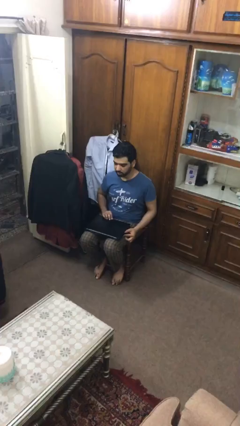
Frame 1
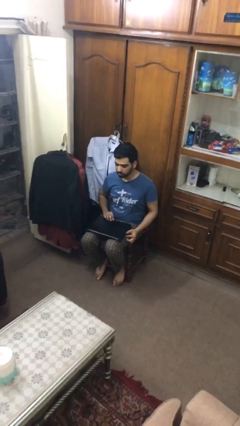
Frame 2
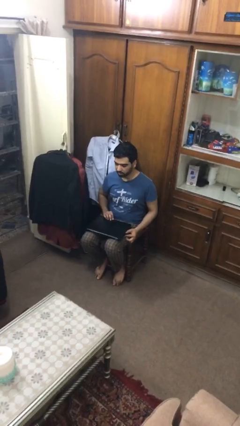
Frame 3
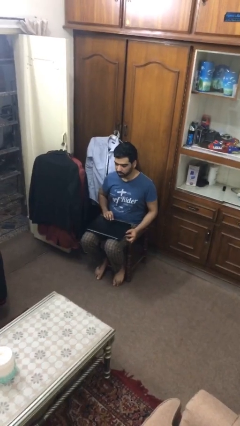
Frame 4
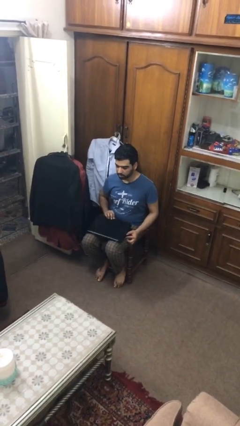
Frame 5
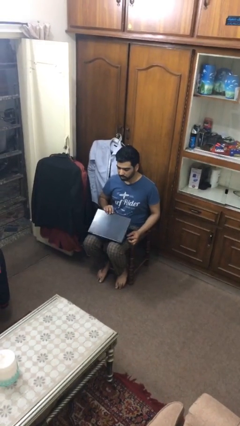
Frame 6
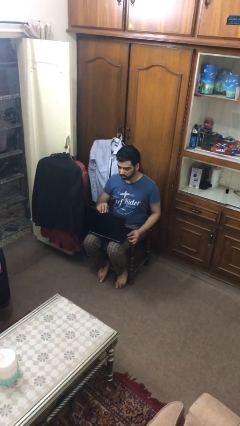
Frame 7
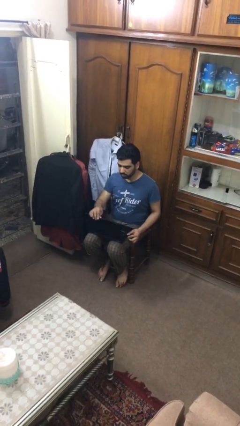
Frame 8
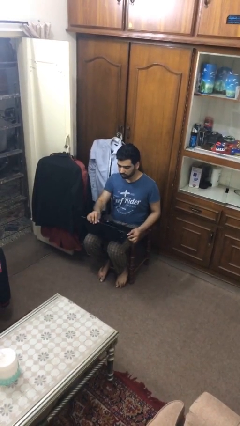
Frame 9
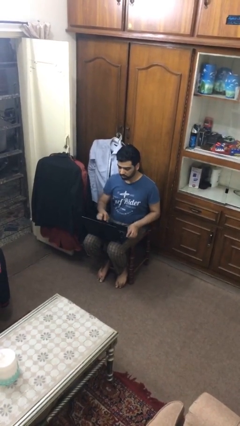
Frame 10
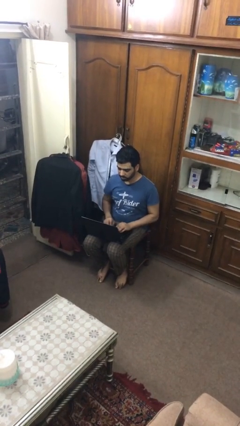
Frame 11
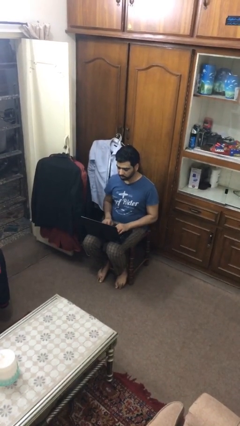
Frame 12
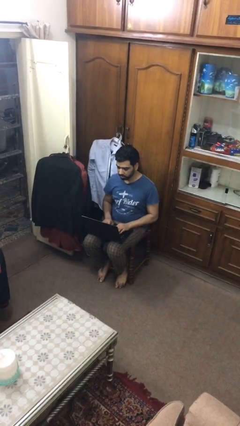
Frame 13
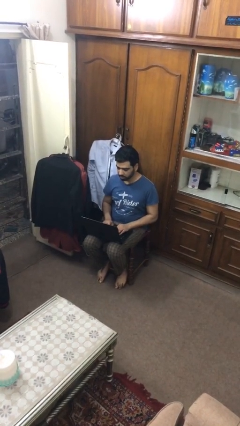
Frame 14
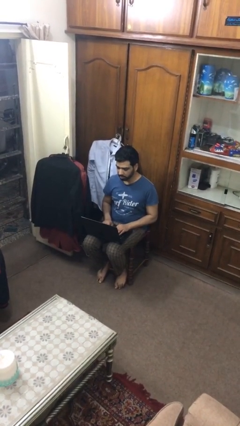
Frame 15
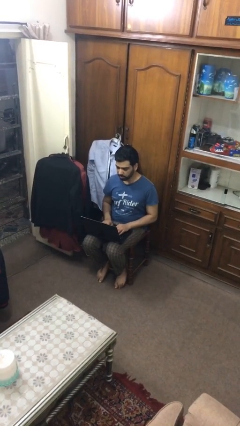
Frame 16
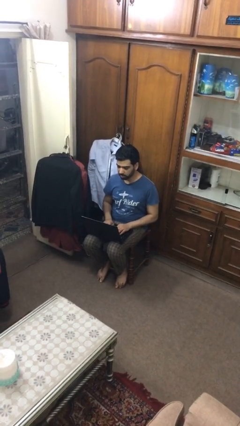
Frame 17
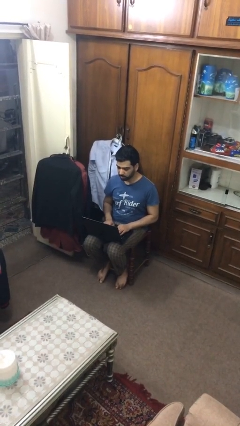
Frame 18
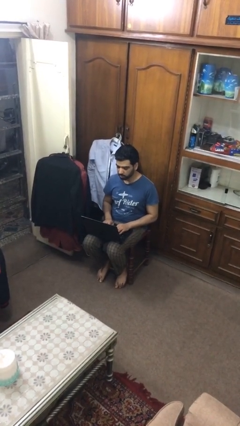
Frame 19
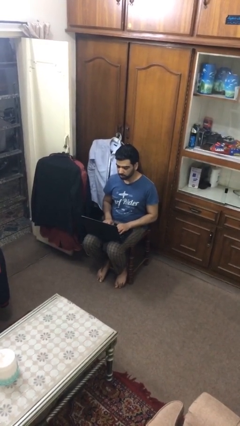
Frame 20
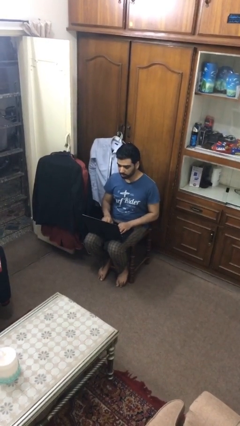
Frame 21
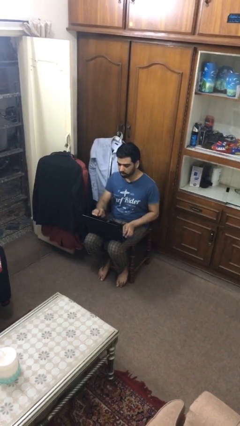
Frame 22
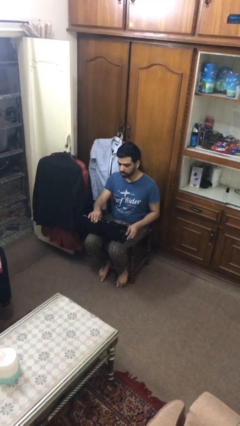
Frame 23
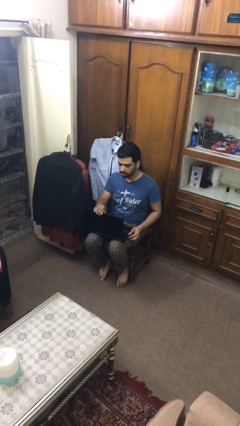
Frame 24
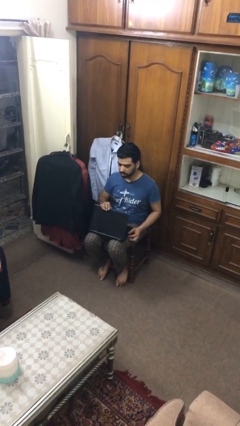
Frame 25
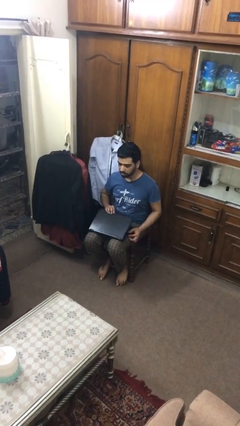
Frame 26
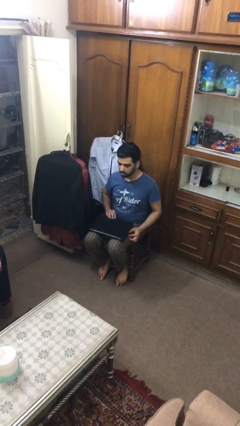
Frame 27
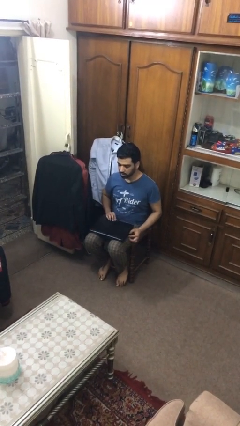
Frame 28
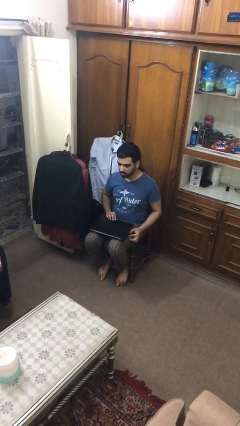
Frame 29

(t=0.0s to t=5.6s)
person interacts with laptop

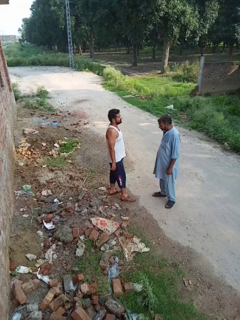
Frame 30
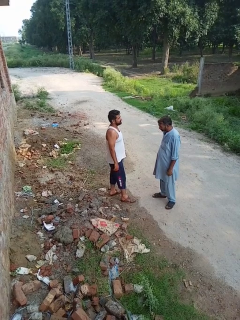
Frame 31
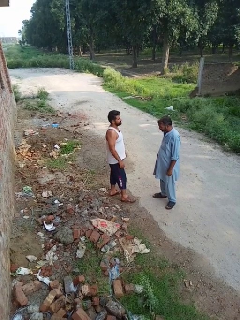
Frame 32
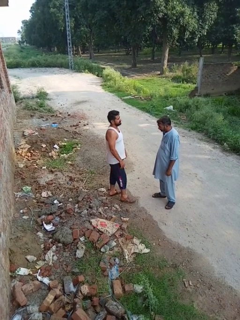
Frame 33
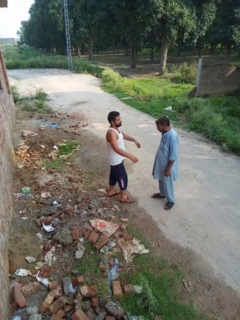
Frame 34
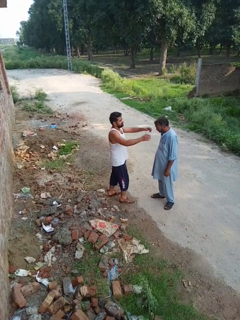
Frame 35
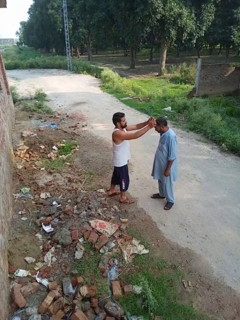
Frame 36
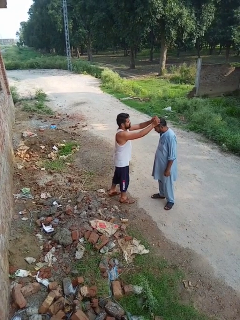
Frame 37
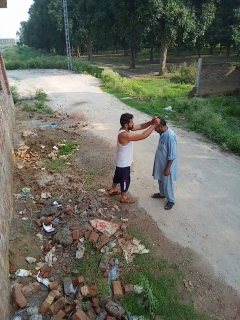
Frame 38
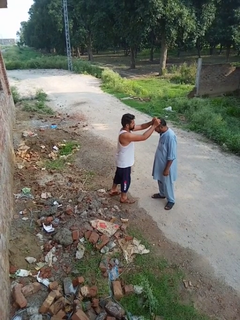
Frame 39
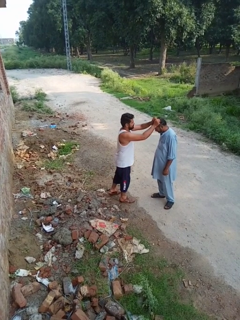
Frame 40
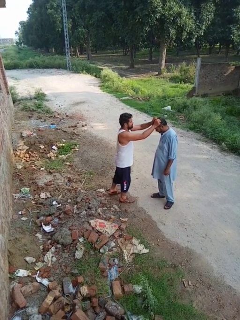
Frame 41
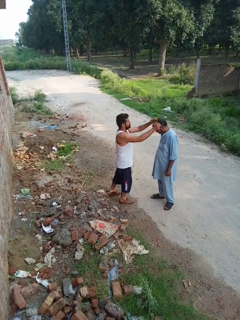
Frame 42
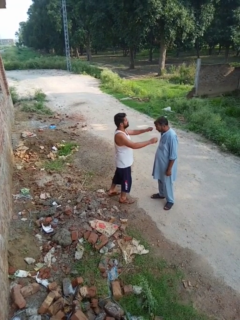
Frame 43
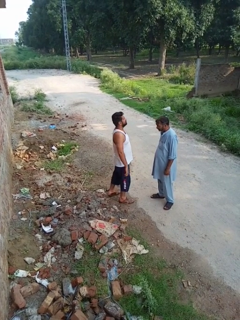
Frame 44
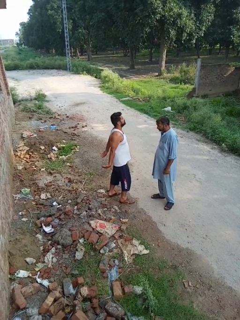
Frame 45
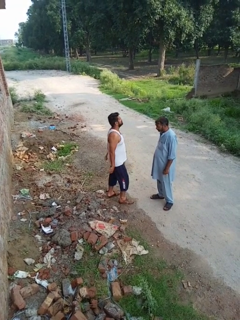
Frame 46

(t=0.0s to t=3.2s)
person grabs person by hair

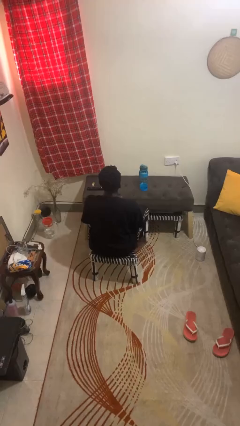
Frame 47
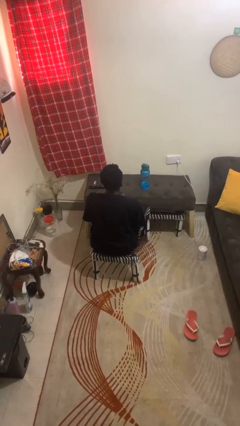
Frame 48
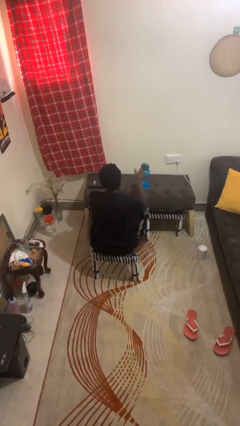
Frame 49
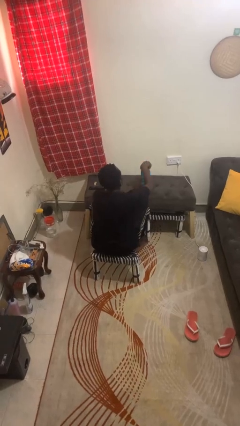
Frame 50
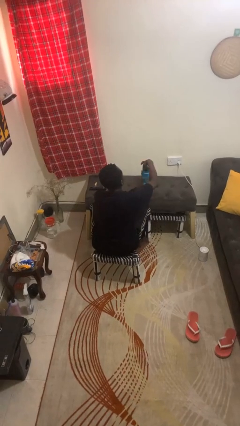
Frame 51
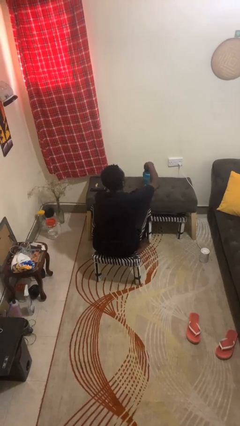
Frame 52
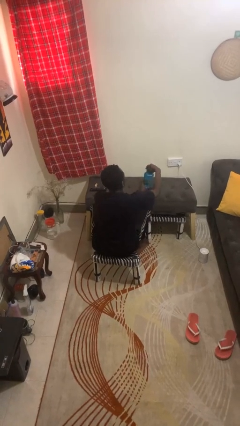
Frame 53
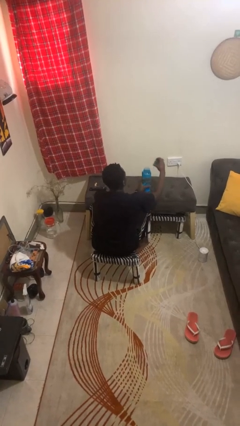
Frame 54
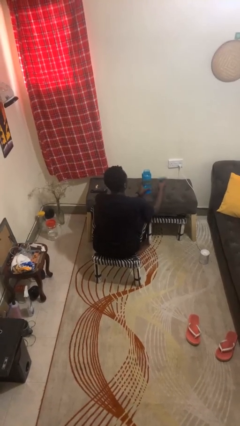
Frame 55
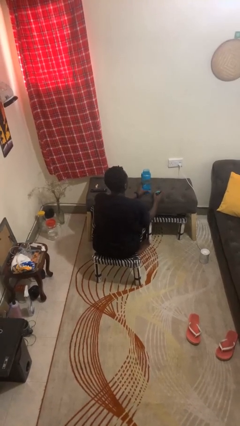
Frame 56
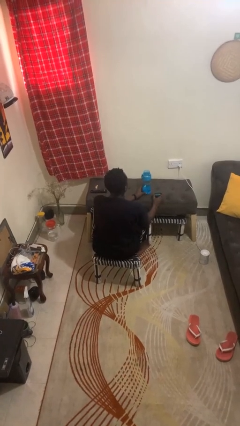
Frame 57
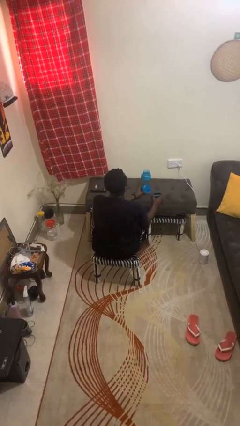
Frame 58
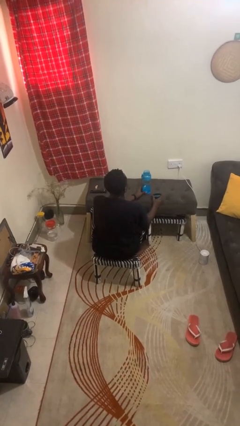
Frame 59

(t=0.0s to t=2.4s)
person opens jar

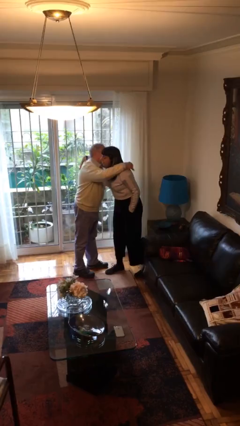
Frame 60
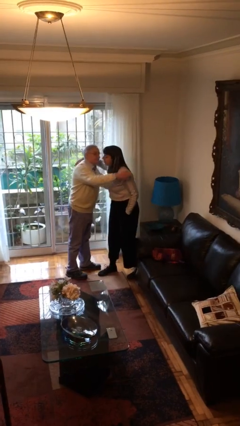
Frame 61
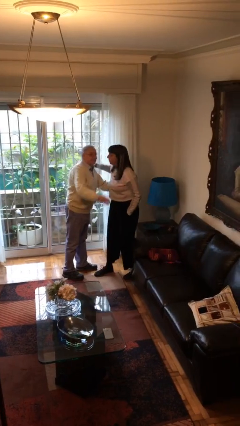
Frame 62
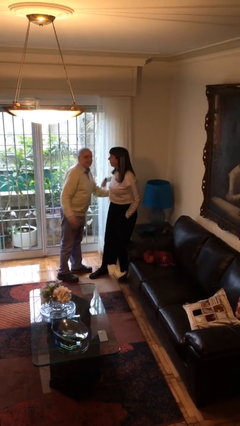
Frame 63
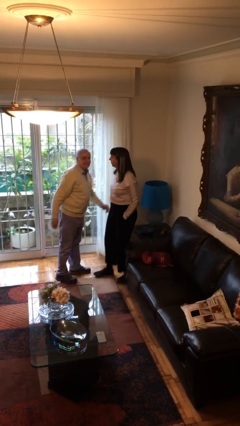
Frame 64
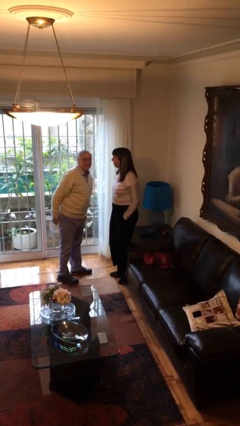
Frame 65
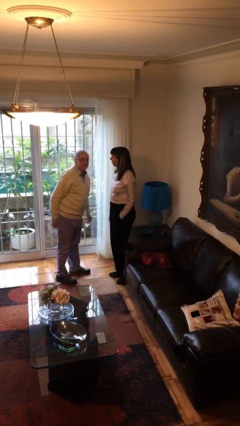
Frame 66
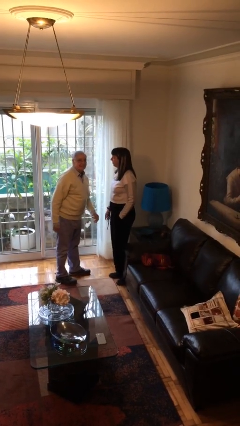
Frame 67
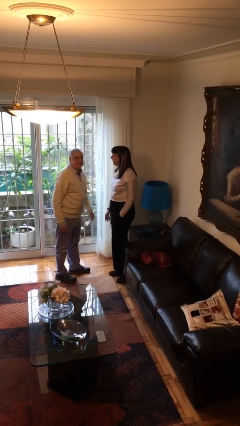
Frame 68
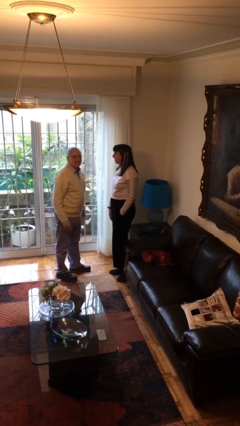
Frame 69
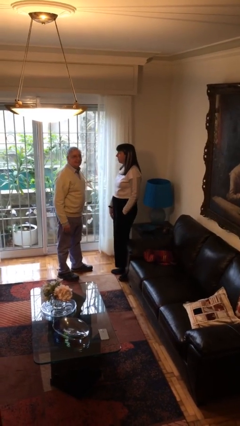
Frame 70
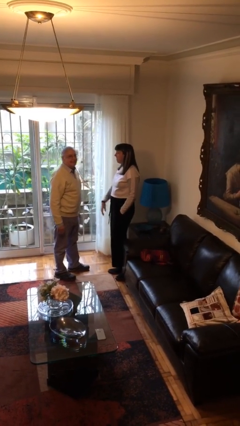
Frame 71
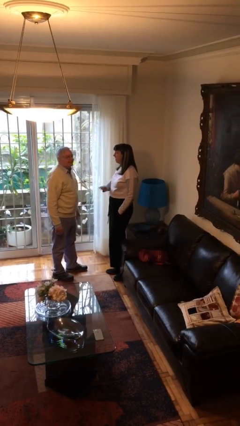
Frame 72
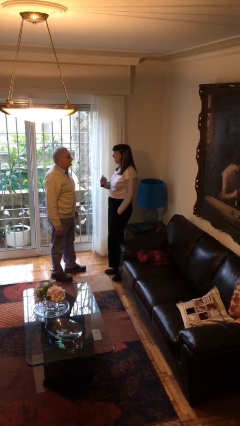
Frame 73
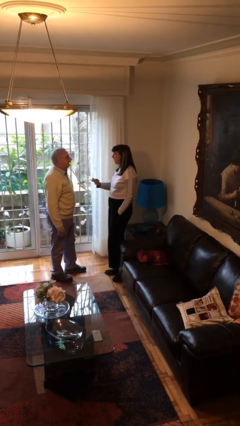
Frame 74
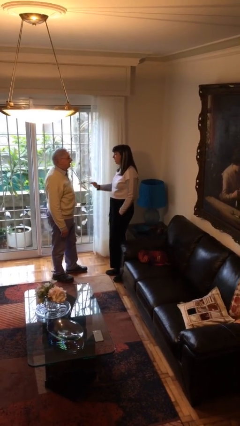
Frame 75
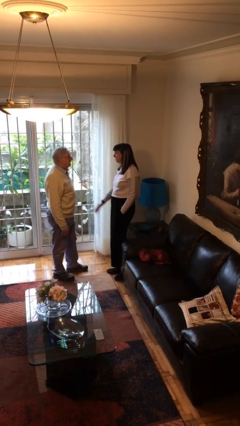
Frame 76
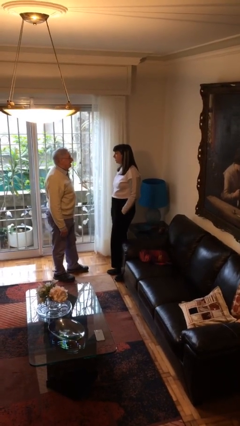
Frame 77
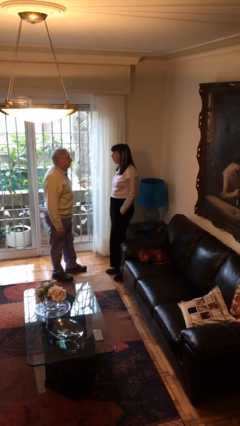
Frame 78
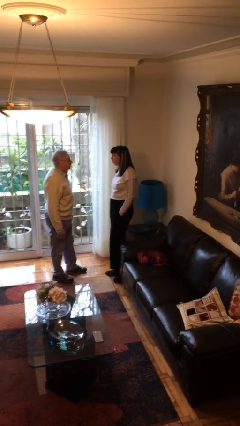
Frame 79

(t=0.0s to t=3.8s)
person talks to person

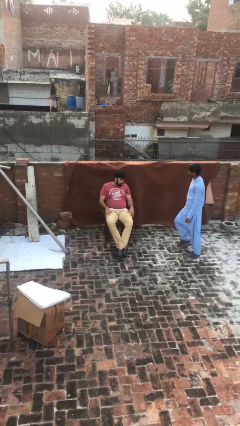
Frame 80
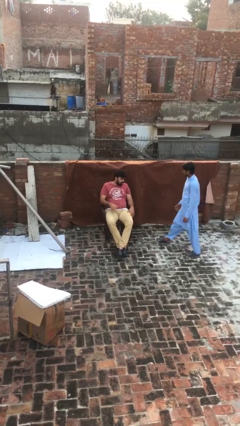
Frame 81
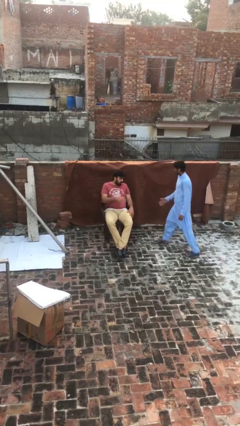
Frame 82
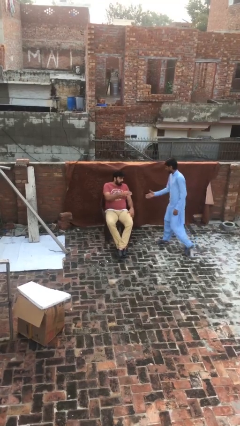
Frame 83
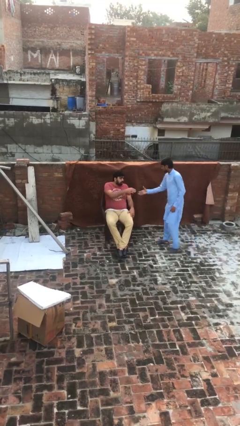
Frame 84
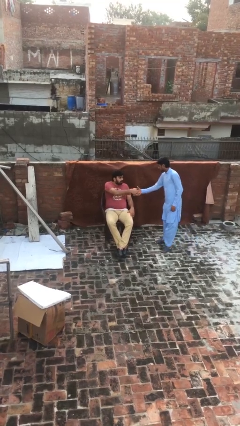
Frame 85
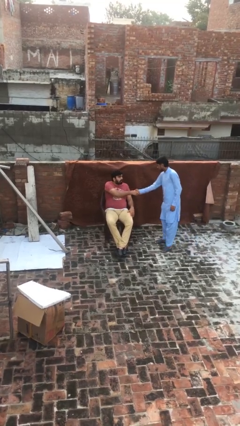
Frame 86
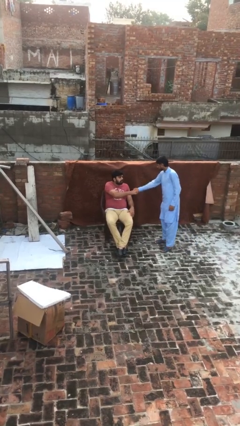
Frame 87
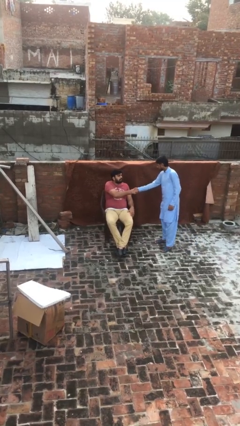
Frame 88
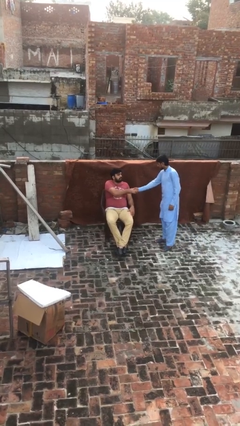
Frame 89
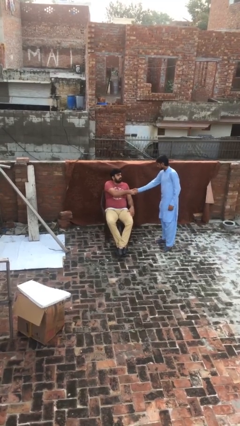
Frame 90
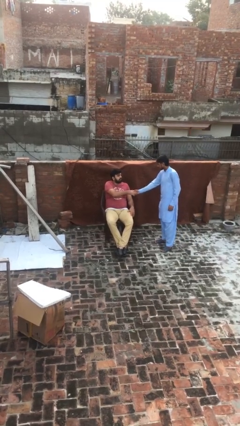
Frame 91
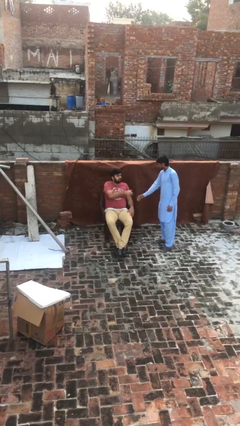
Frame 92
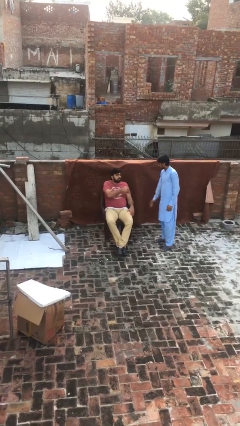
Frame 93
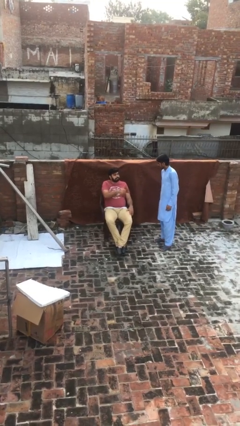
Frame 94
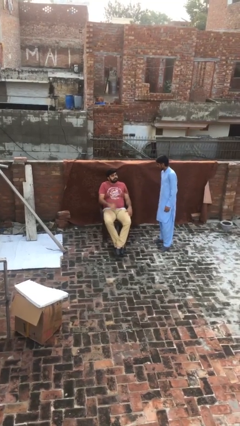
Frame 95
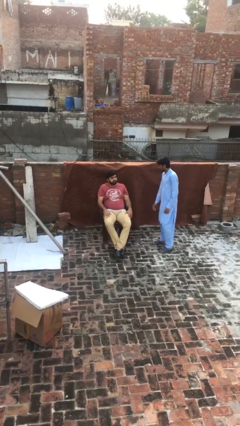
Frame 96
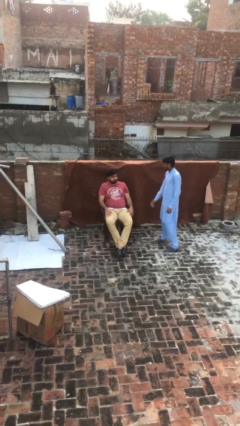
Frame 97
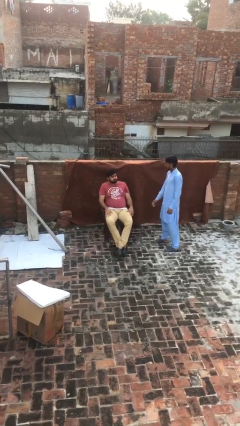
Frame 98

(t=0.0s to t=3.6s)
person shakes hand
